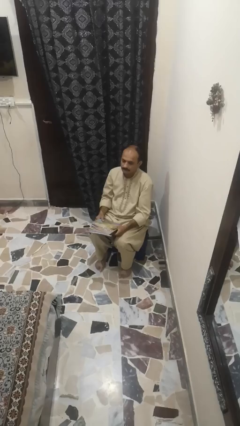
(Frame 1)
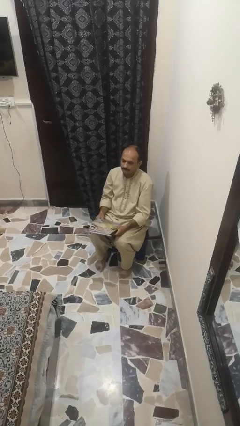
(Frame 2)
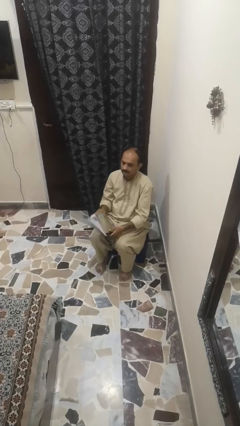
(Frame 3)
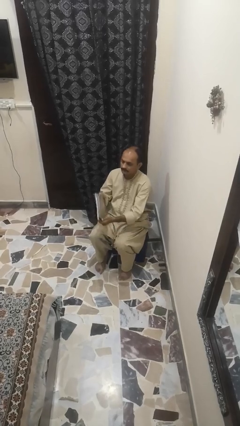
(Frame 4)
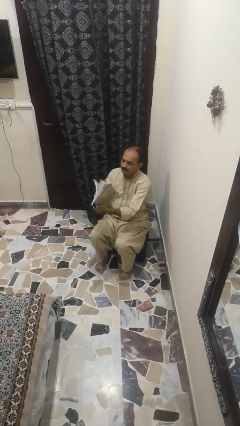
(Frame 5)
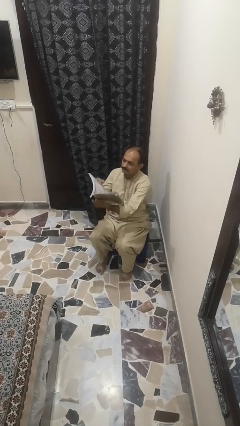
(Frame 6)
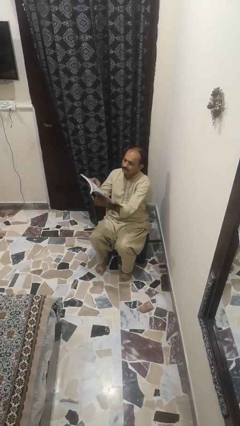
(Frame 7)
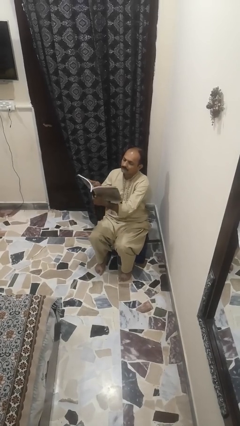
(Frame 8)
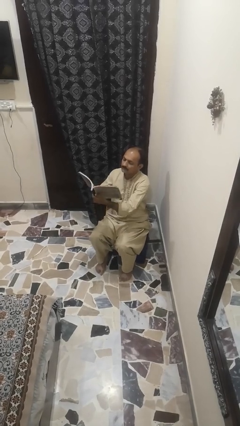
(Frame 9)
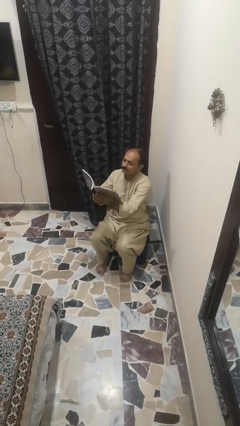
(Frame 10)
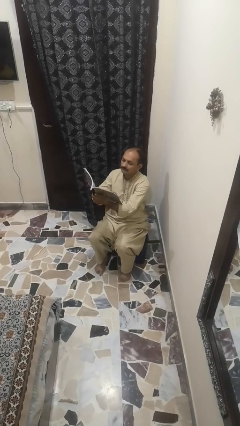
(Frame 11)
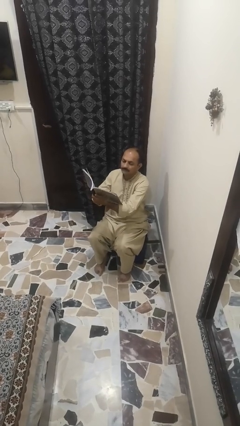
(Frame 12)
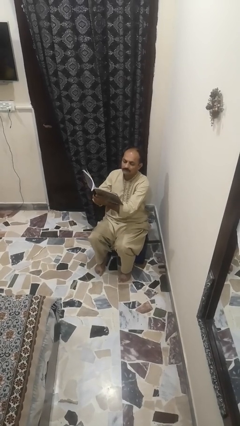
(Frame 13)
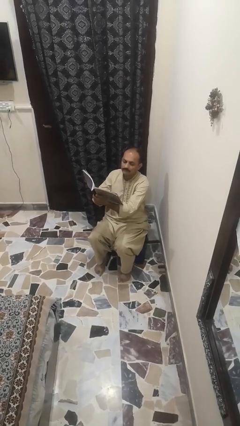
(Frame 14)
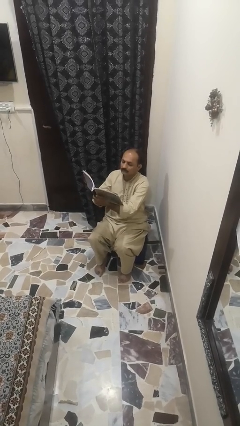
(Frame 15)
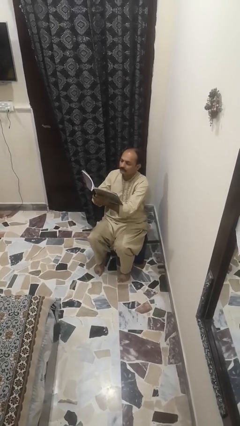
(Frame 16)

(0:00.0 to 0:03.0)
person reads book

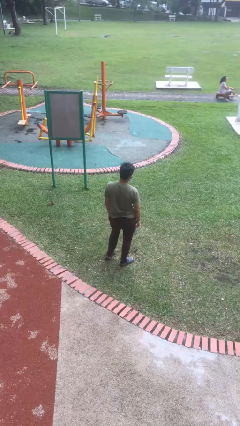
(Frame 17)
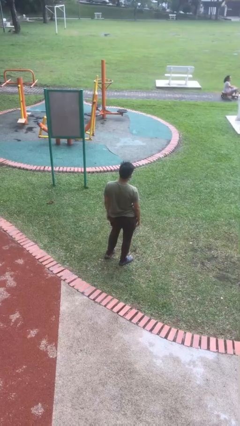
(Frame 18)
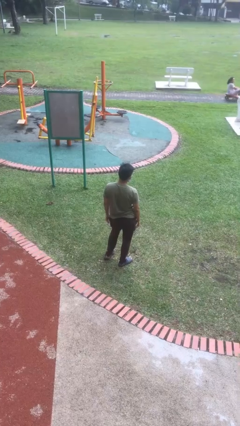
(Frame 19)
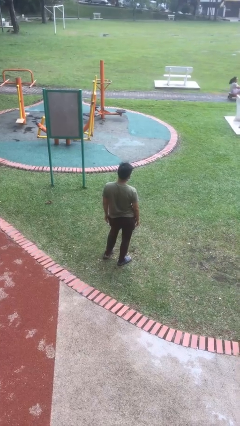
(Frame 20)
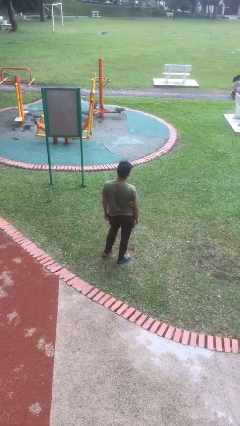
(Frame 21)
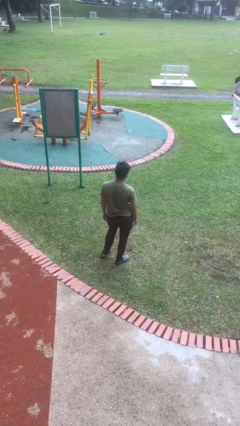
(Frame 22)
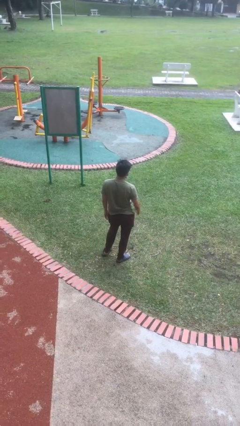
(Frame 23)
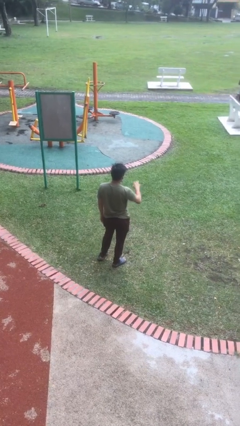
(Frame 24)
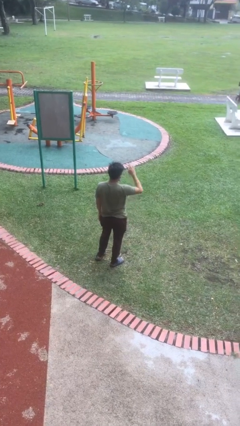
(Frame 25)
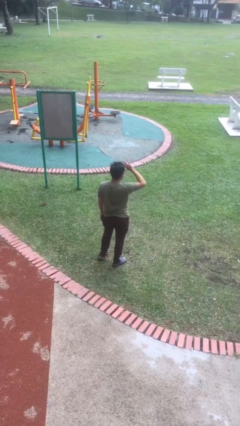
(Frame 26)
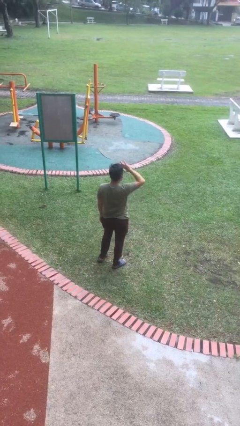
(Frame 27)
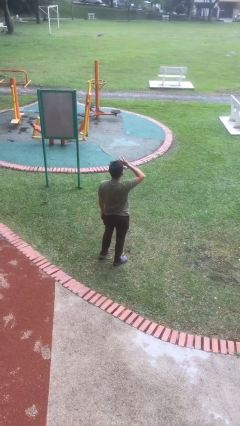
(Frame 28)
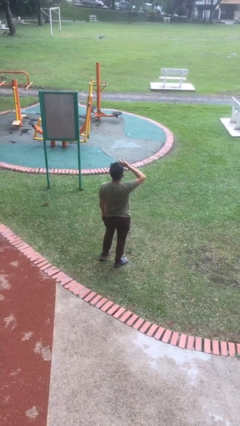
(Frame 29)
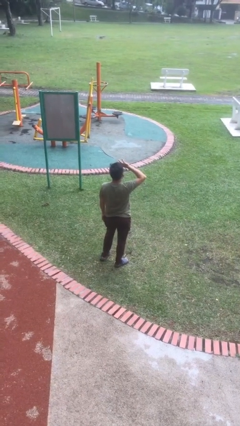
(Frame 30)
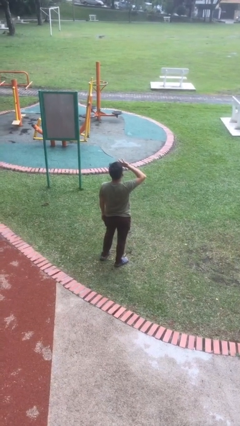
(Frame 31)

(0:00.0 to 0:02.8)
person shades eyes

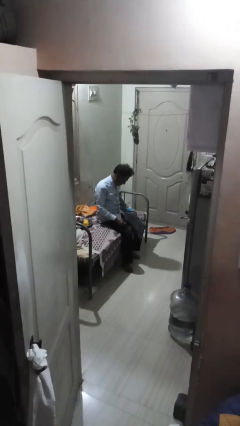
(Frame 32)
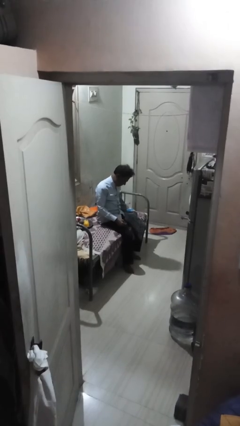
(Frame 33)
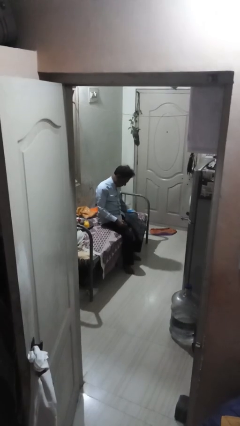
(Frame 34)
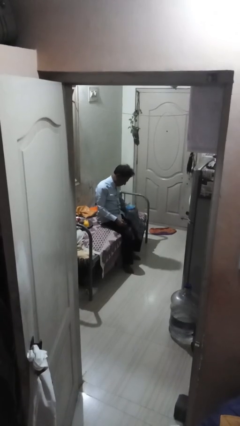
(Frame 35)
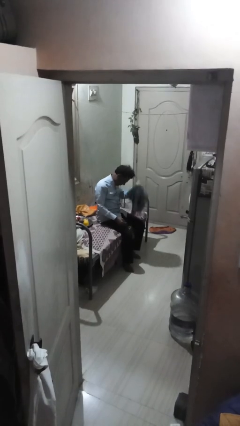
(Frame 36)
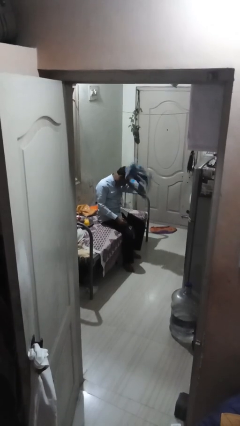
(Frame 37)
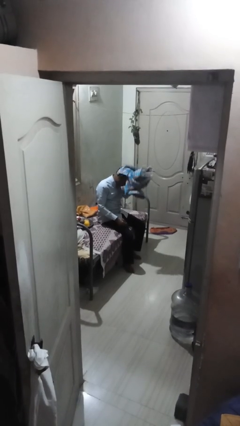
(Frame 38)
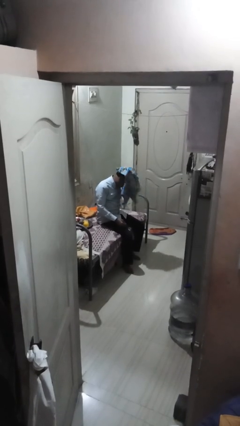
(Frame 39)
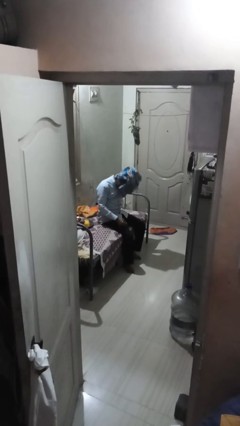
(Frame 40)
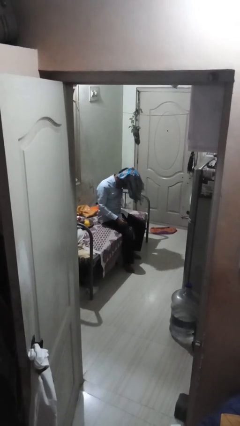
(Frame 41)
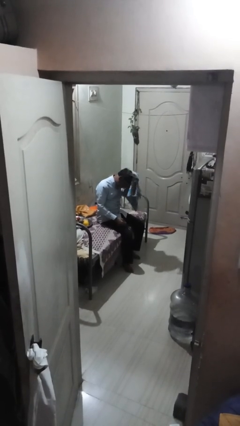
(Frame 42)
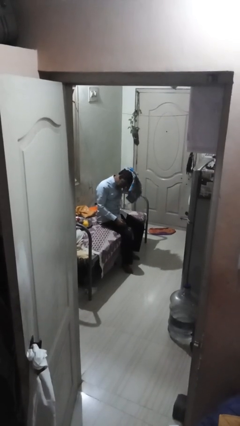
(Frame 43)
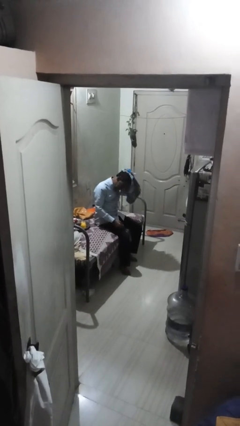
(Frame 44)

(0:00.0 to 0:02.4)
person dries hair with towel

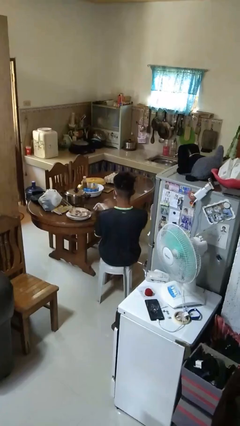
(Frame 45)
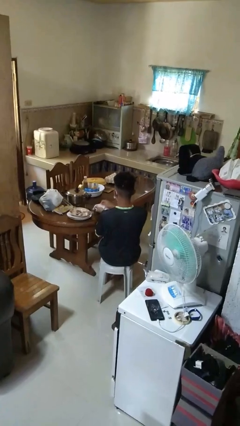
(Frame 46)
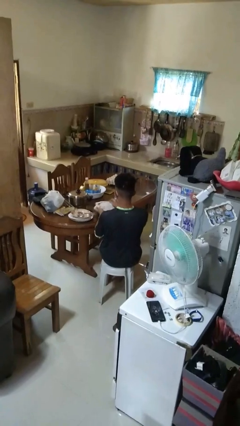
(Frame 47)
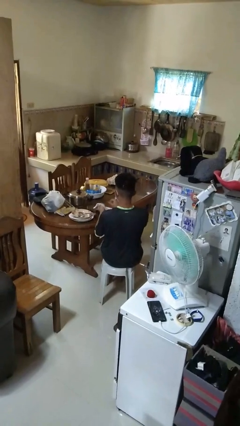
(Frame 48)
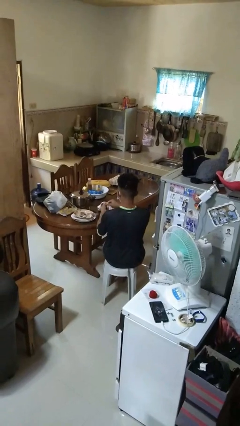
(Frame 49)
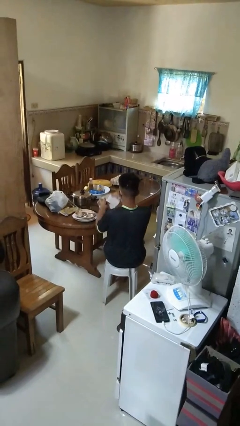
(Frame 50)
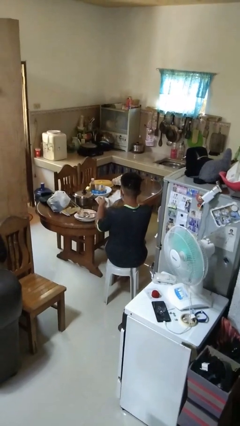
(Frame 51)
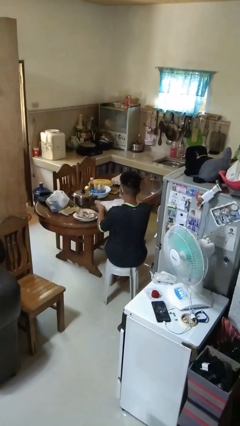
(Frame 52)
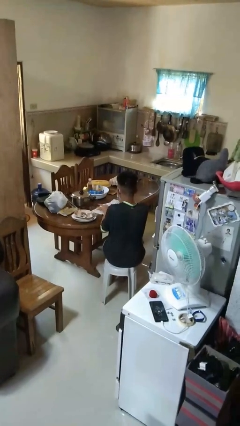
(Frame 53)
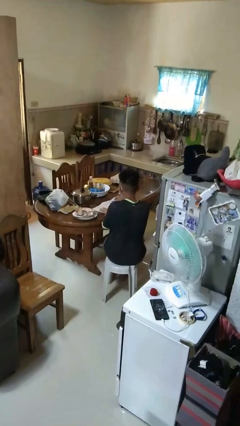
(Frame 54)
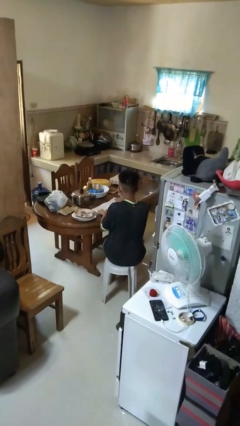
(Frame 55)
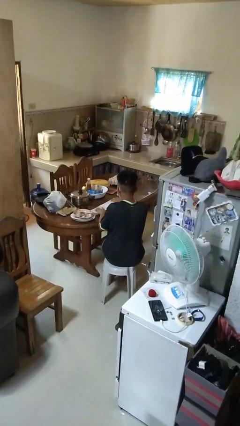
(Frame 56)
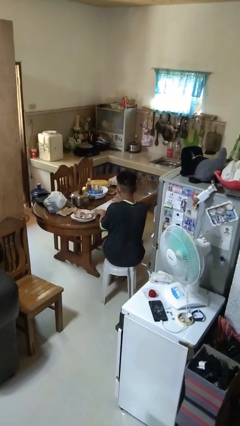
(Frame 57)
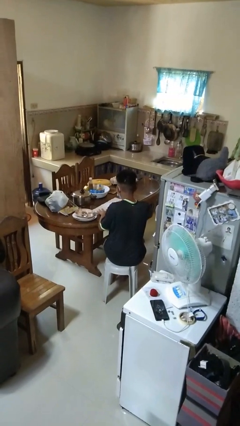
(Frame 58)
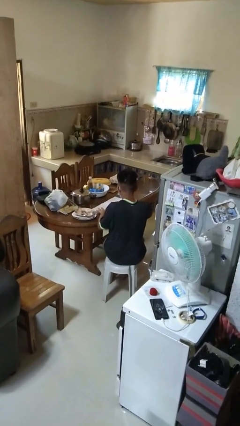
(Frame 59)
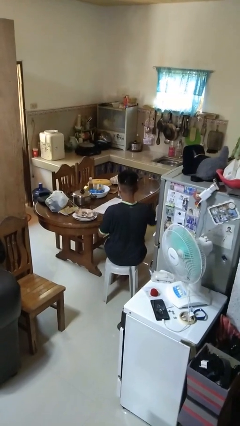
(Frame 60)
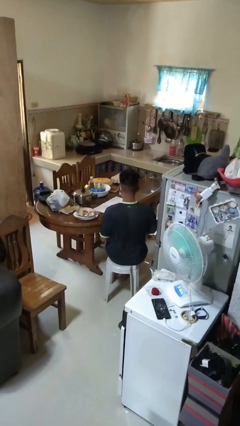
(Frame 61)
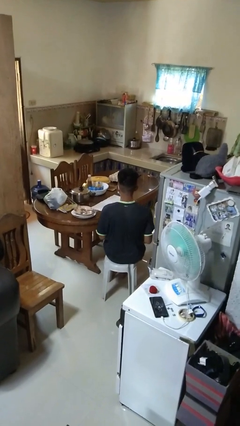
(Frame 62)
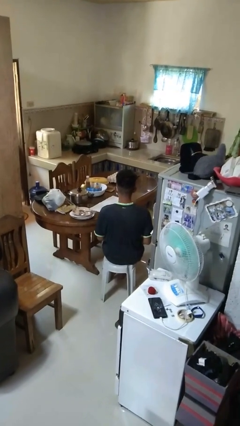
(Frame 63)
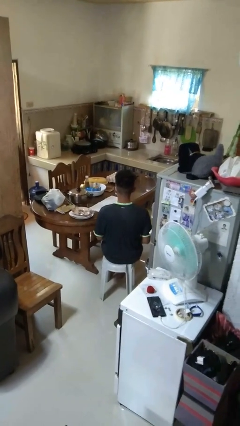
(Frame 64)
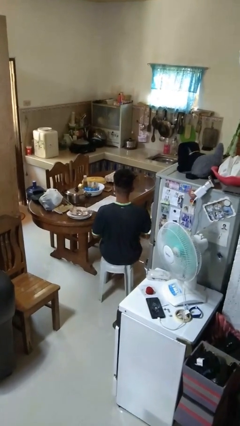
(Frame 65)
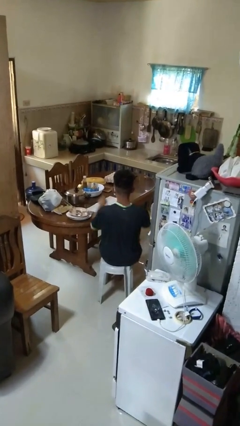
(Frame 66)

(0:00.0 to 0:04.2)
person spreads tablecloth

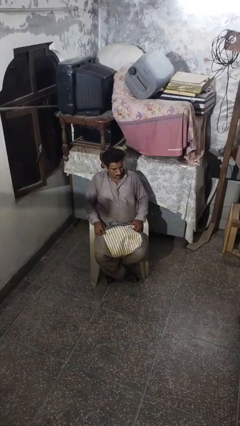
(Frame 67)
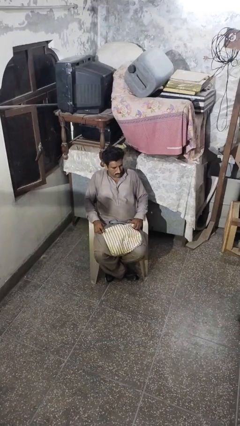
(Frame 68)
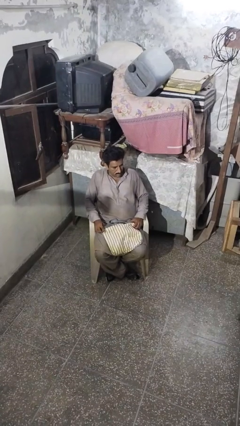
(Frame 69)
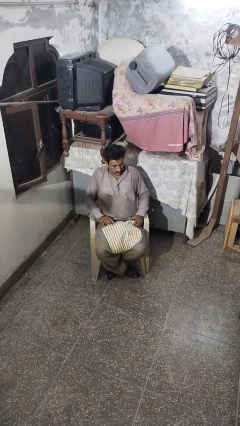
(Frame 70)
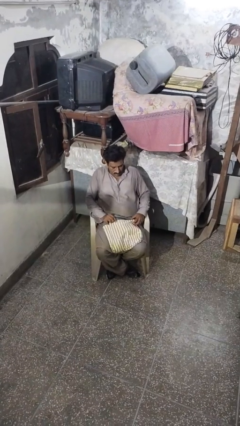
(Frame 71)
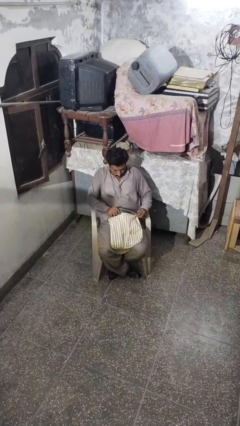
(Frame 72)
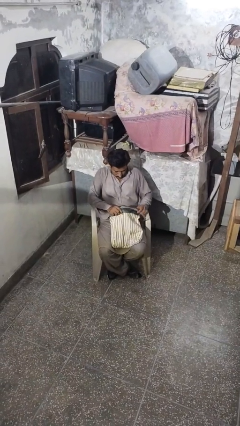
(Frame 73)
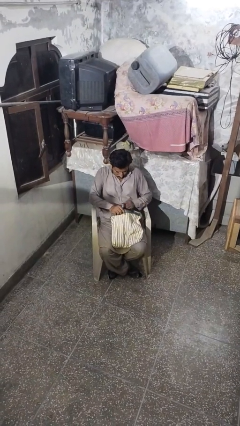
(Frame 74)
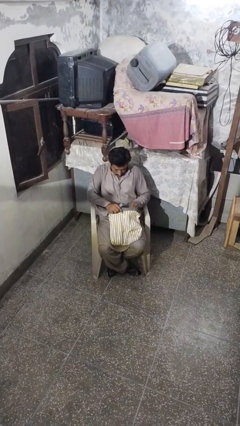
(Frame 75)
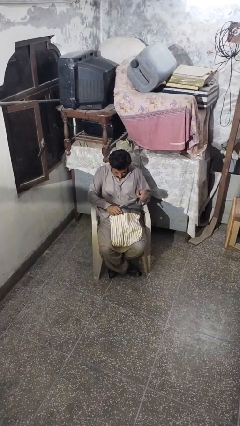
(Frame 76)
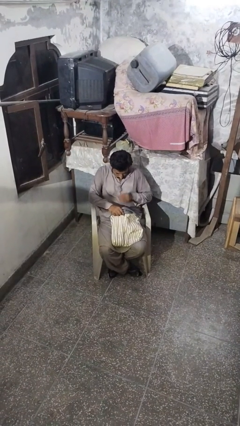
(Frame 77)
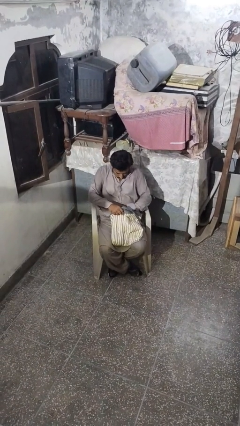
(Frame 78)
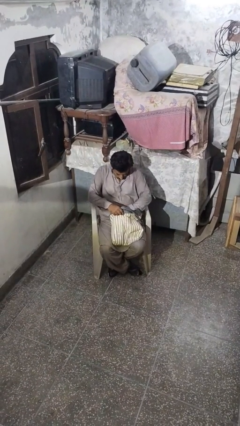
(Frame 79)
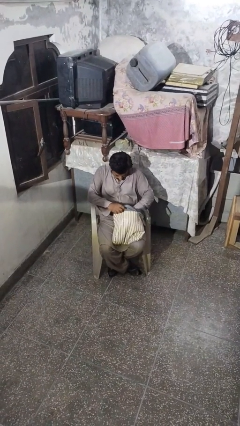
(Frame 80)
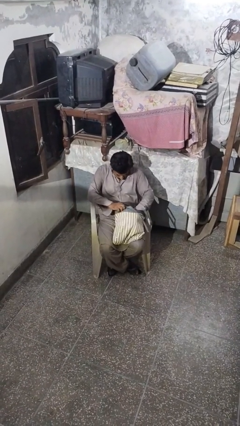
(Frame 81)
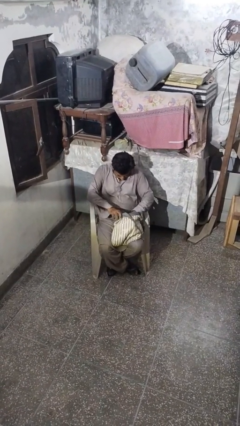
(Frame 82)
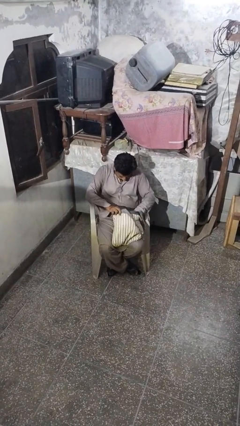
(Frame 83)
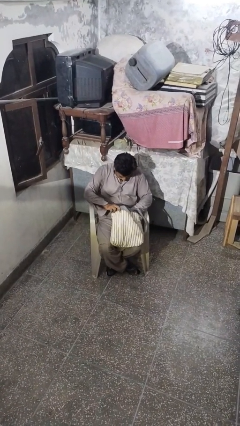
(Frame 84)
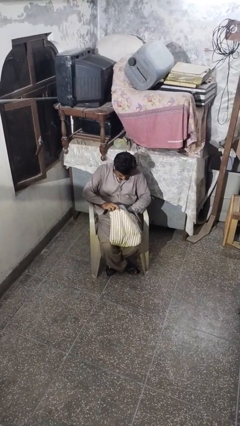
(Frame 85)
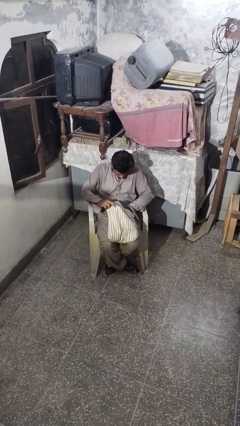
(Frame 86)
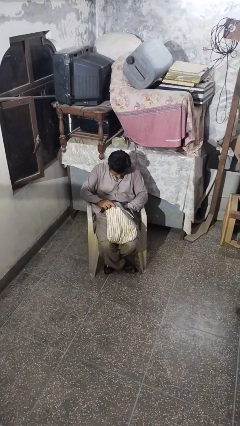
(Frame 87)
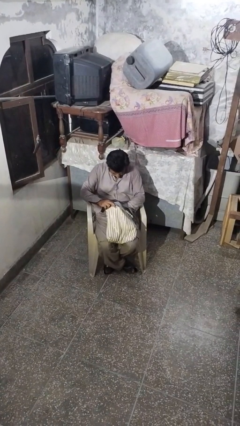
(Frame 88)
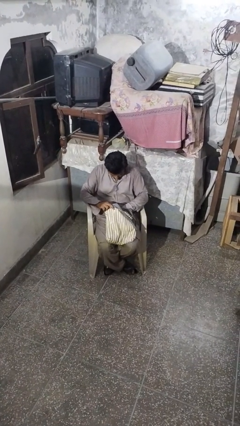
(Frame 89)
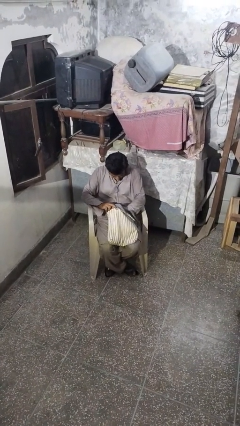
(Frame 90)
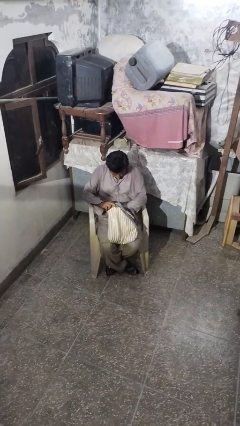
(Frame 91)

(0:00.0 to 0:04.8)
person searches in backpack

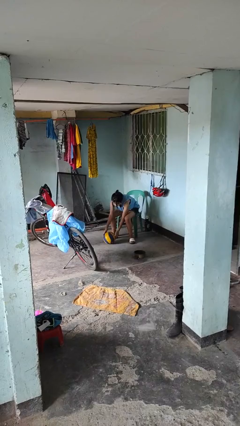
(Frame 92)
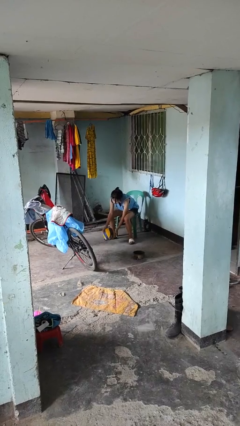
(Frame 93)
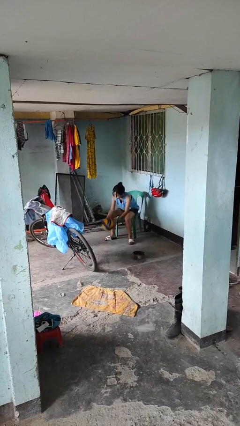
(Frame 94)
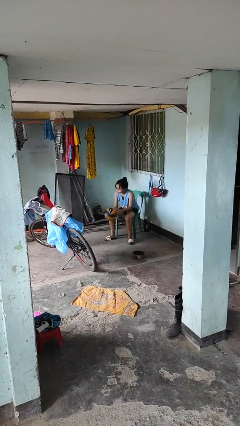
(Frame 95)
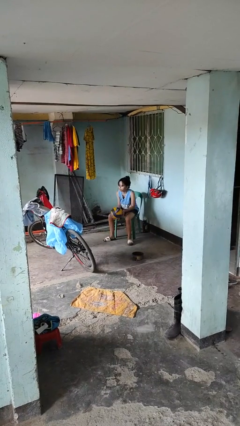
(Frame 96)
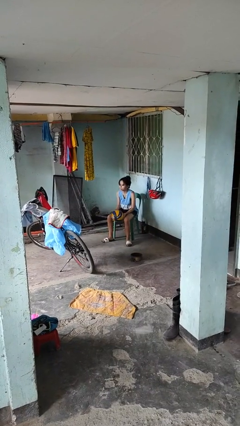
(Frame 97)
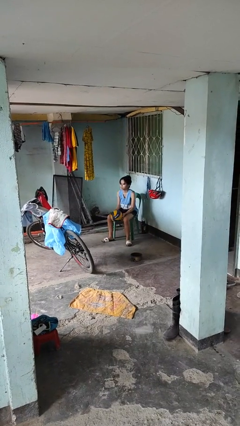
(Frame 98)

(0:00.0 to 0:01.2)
person picks up object from floor
